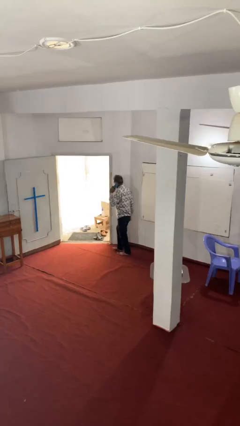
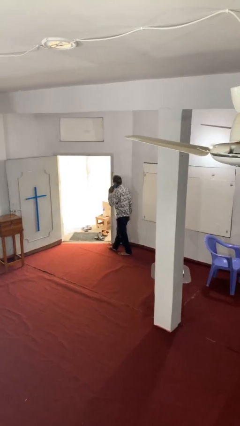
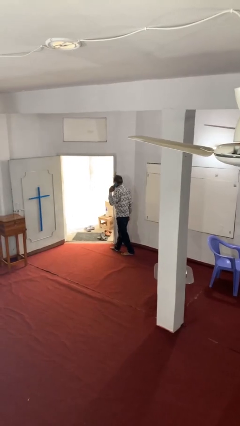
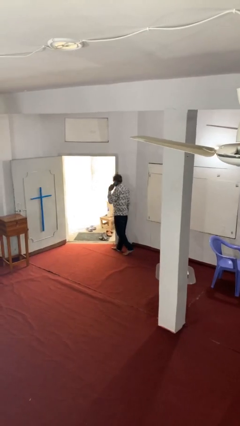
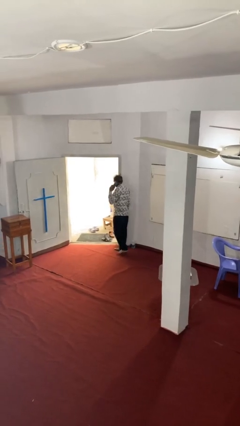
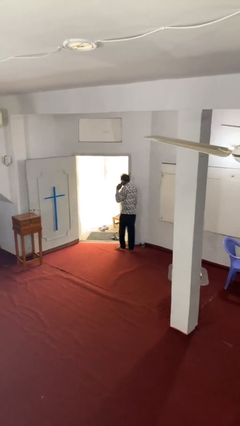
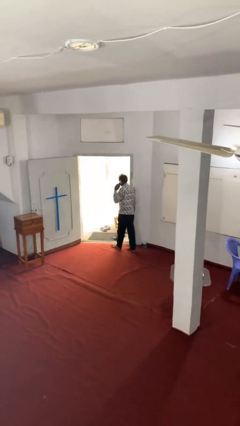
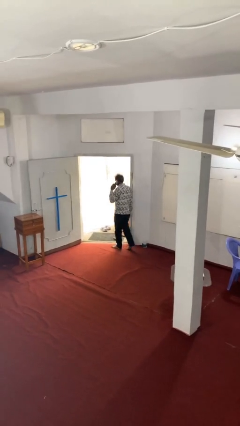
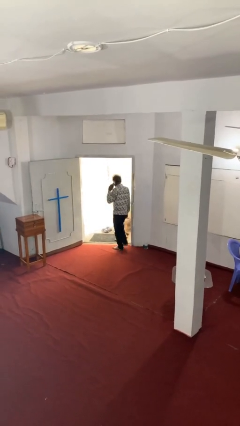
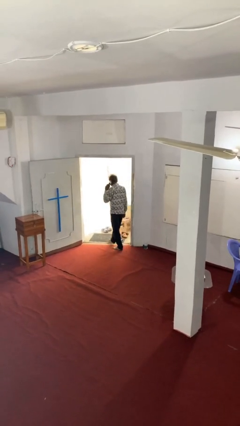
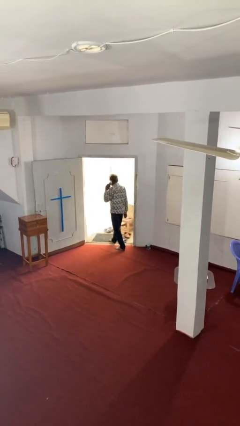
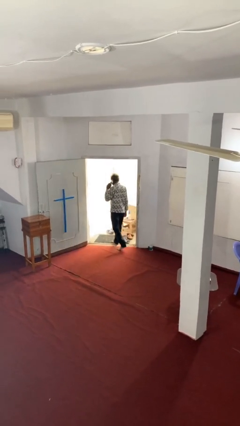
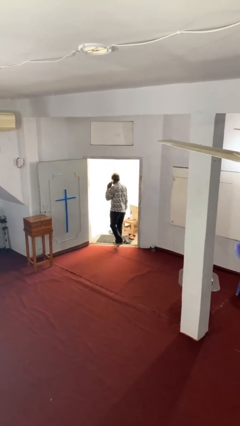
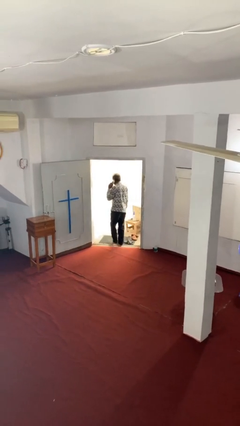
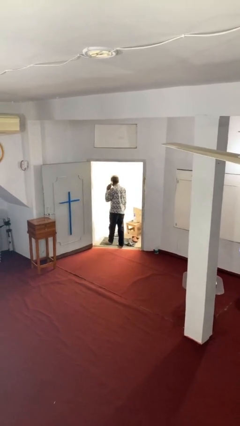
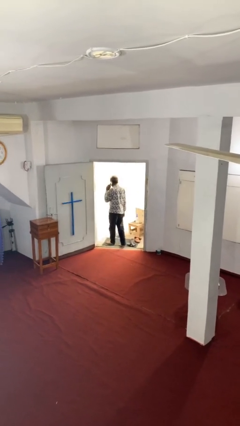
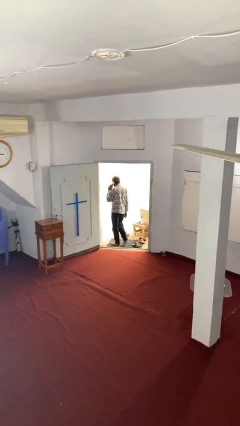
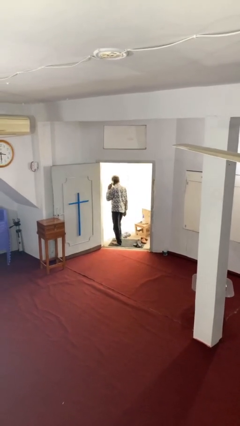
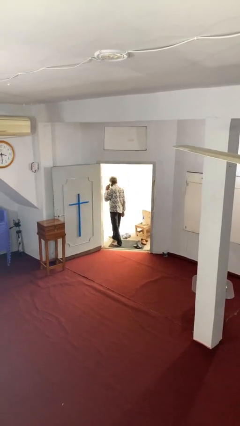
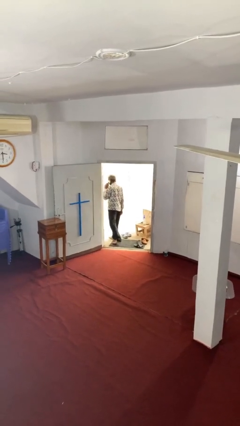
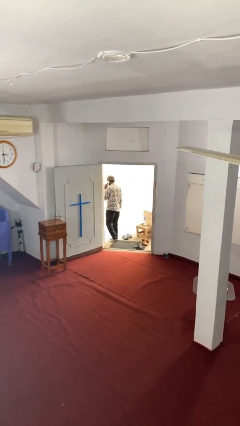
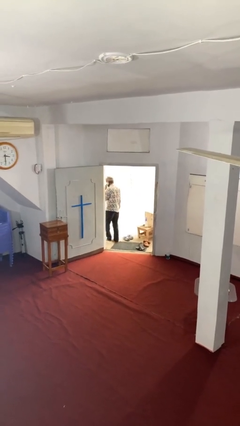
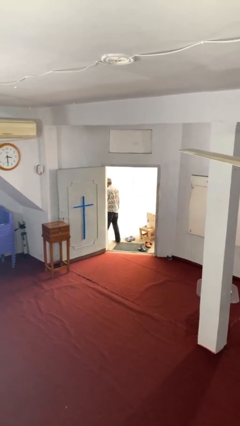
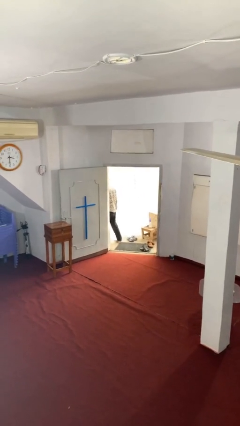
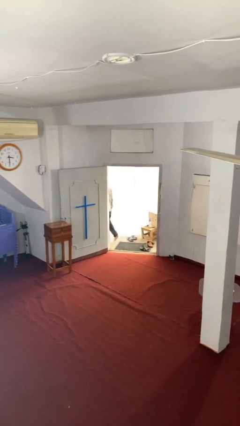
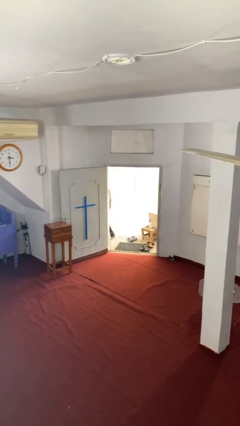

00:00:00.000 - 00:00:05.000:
person exits scene through structure

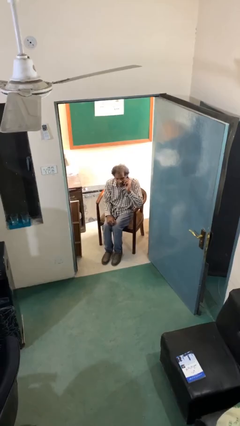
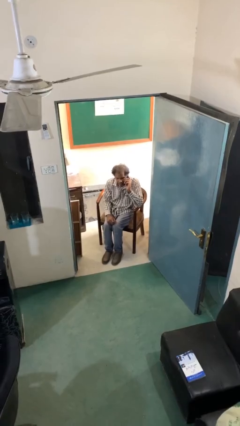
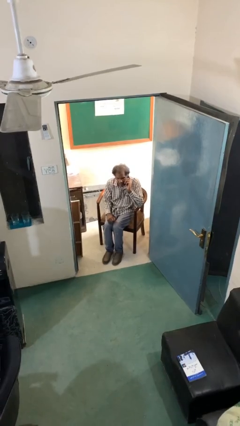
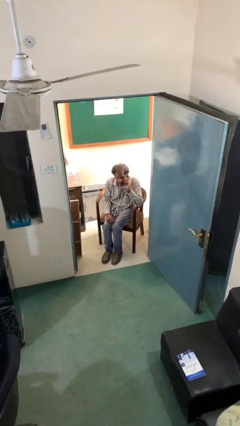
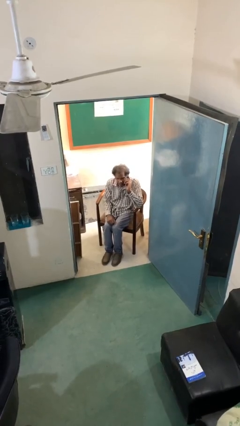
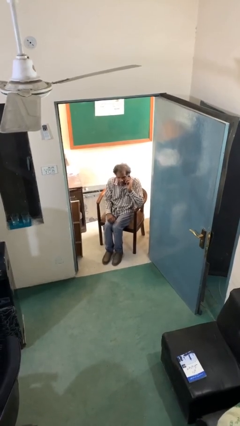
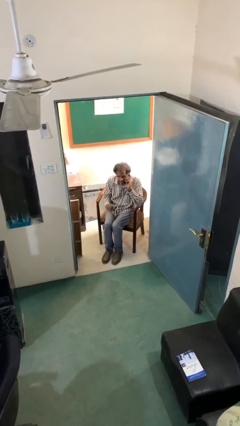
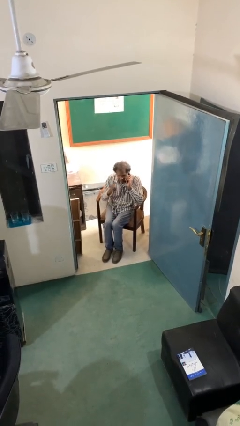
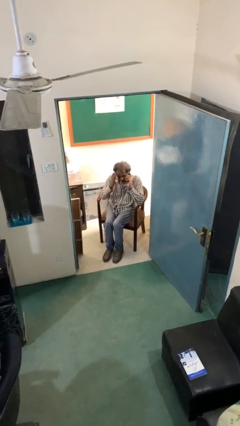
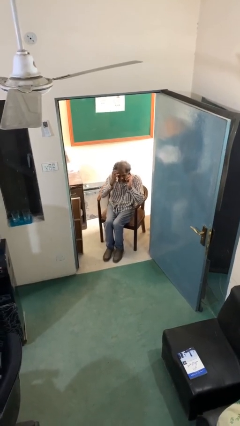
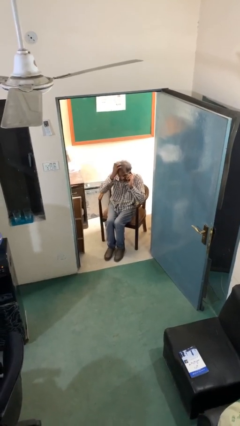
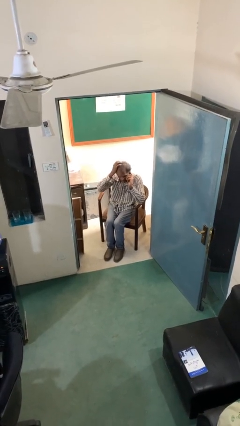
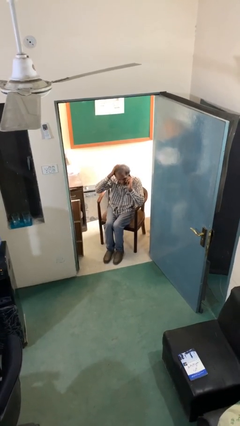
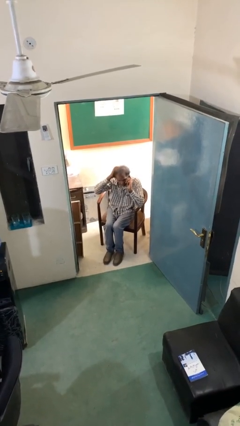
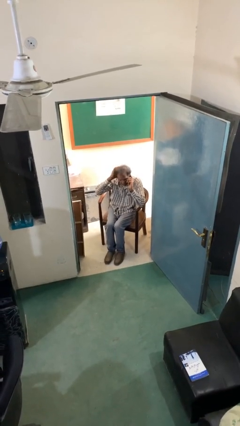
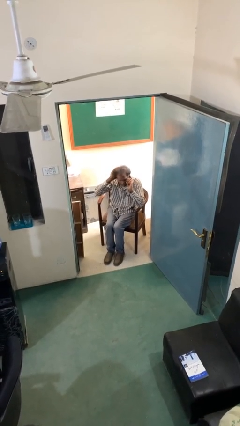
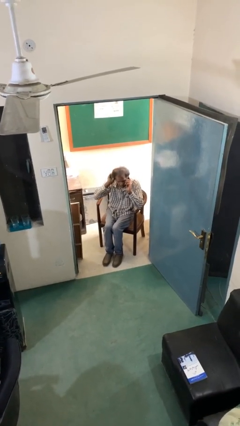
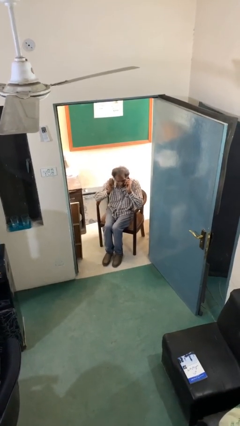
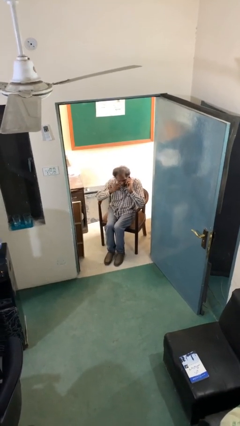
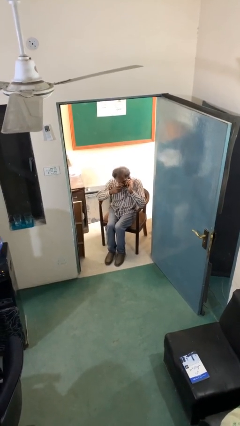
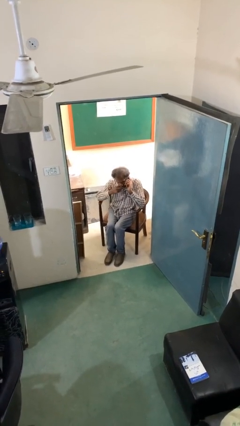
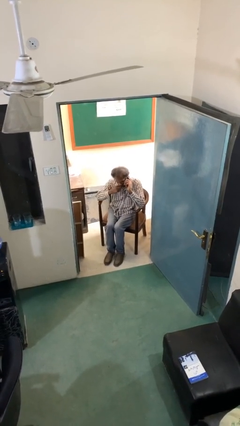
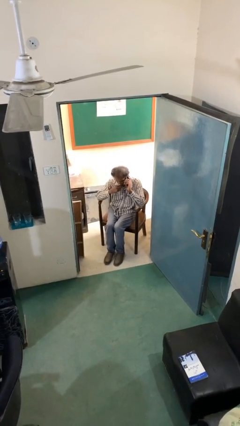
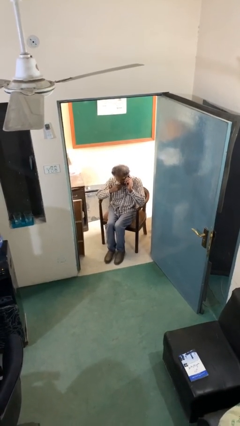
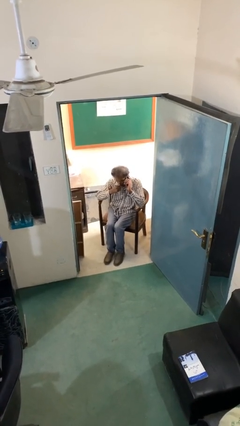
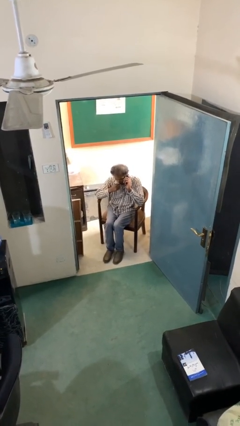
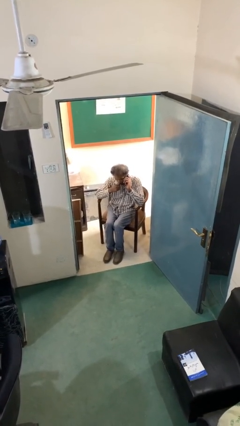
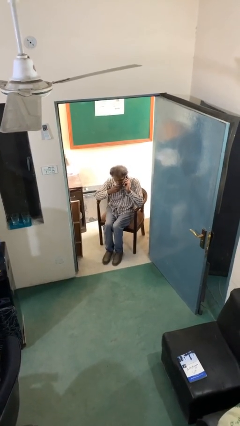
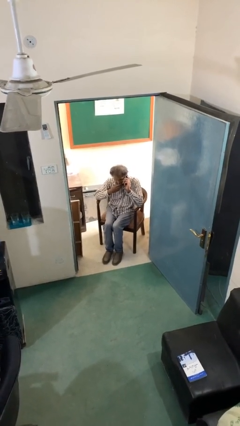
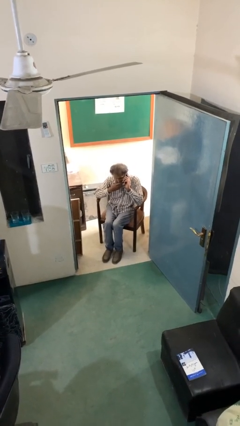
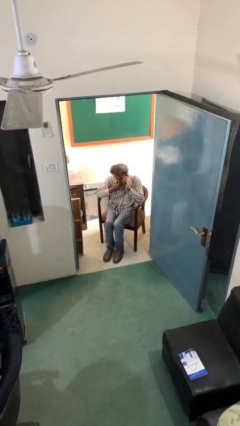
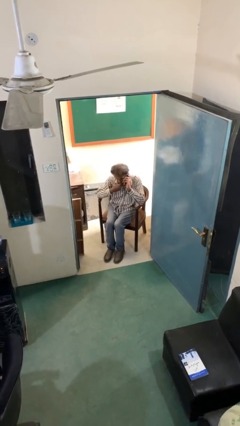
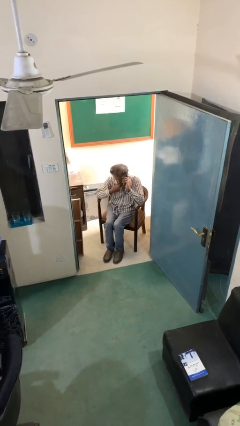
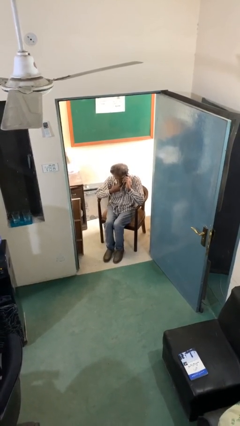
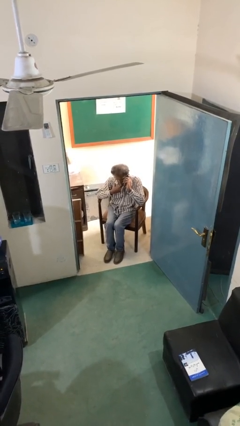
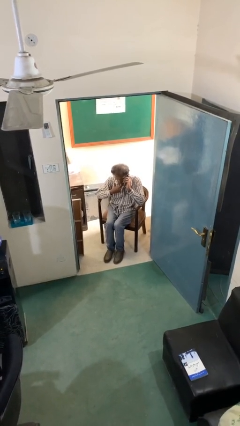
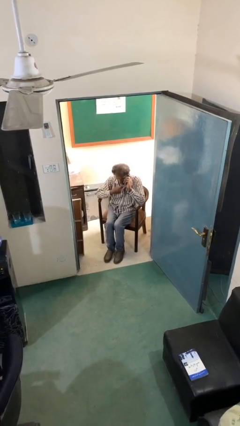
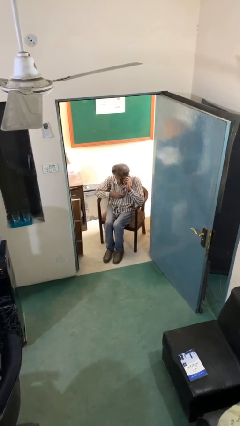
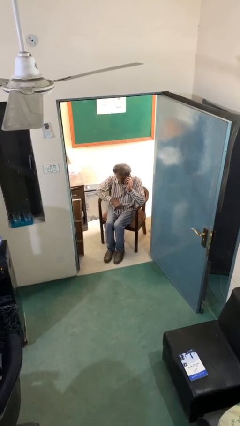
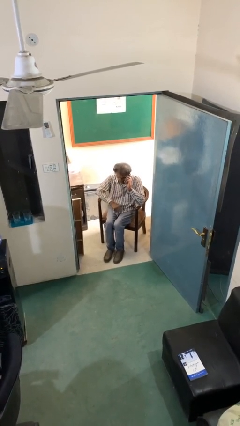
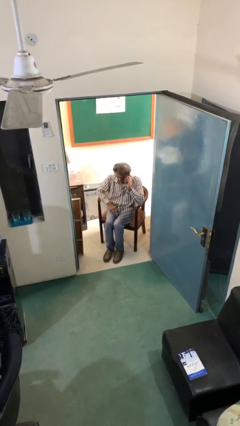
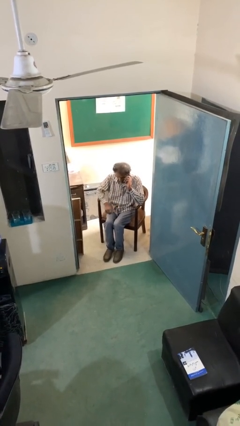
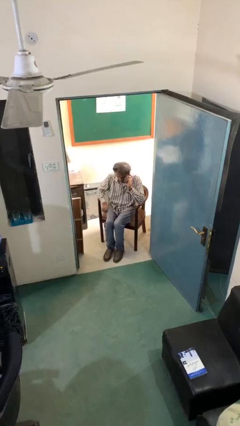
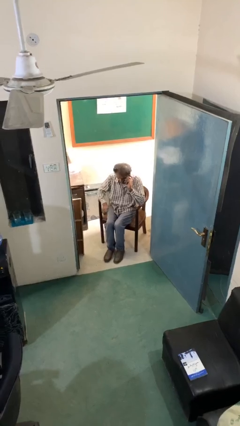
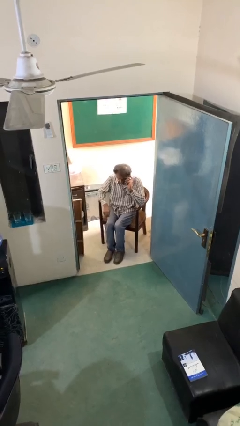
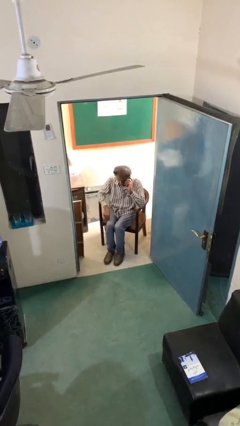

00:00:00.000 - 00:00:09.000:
person talks on phone

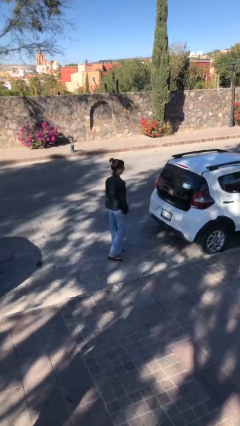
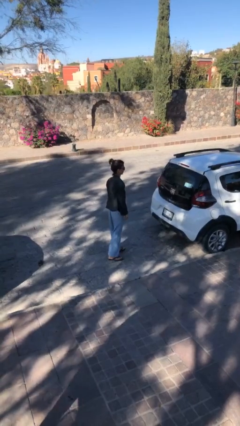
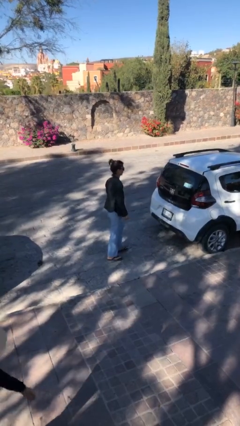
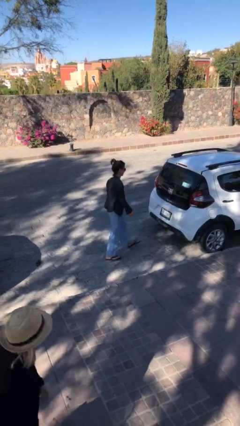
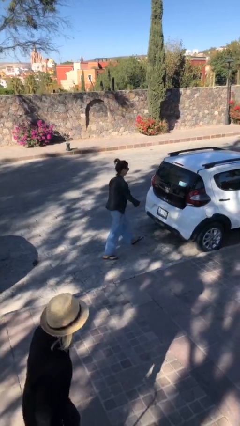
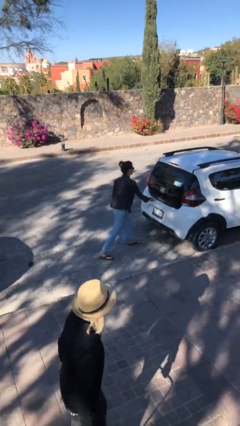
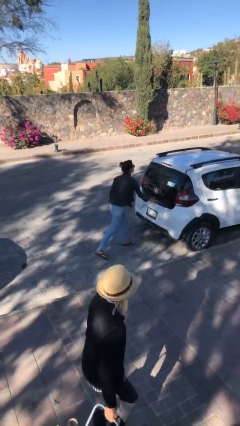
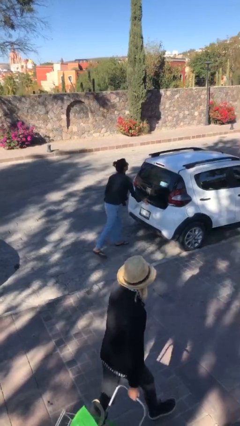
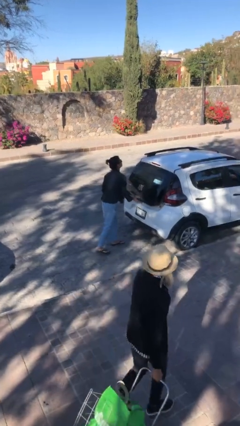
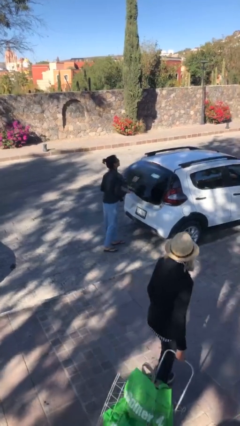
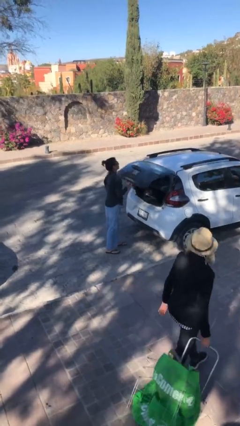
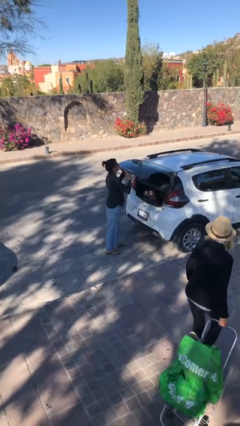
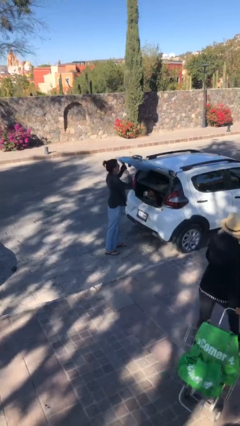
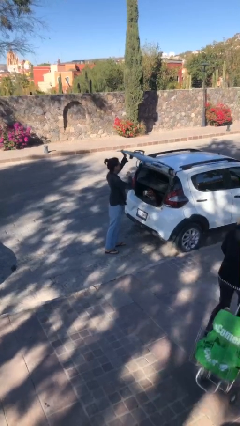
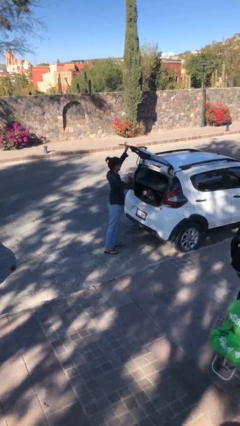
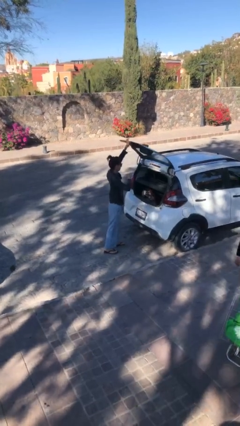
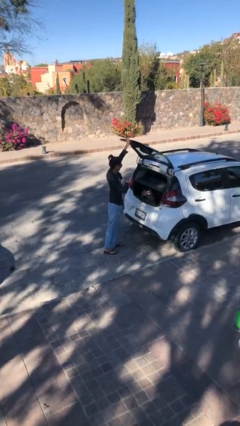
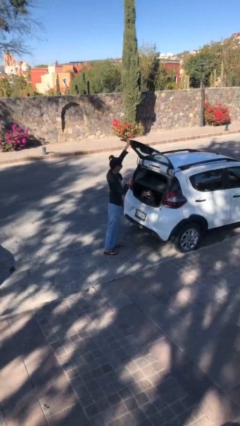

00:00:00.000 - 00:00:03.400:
person opens car trunk

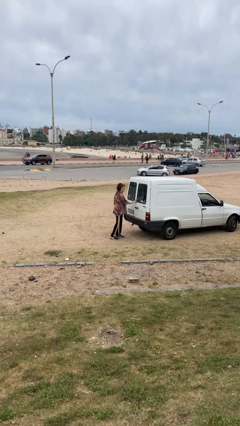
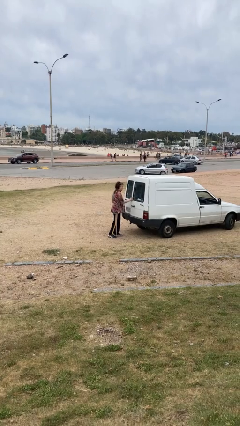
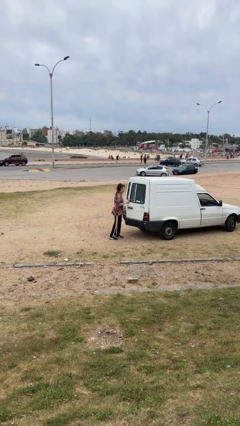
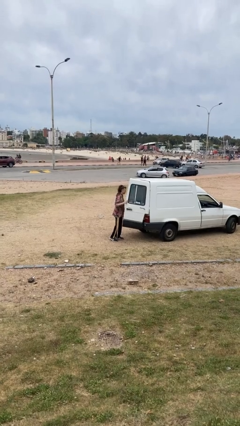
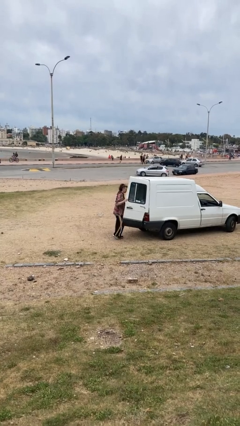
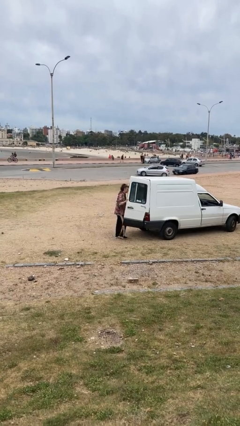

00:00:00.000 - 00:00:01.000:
person opens car door
